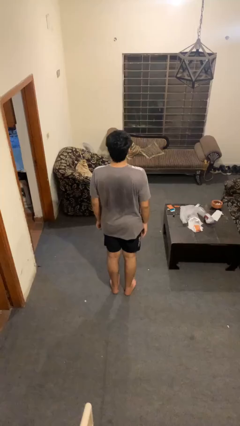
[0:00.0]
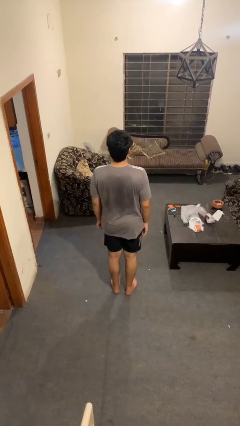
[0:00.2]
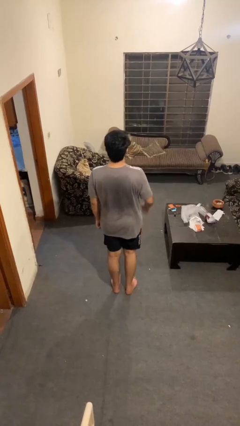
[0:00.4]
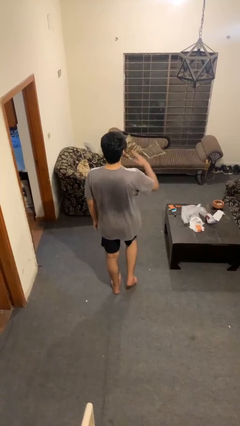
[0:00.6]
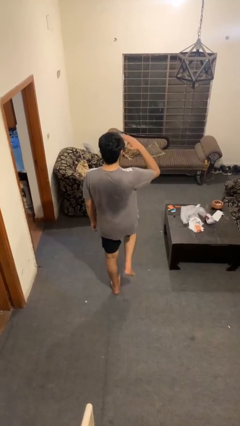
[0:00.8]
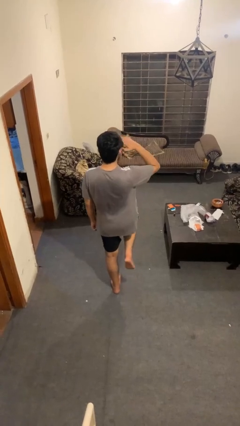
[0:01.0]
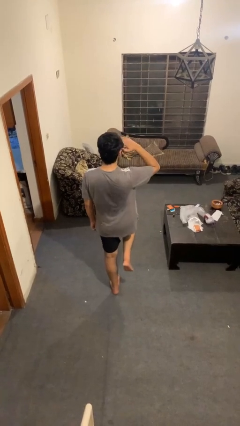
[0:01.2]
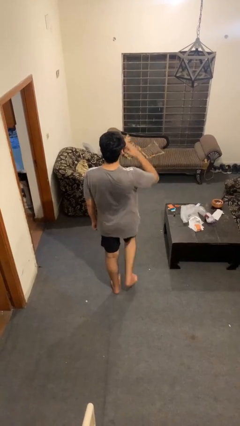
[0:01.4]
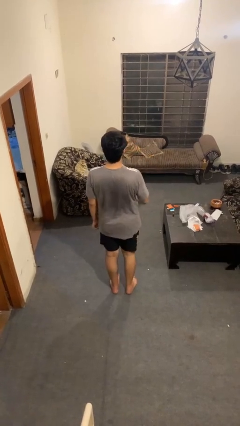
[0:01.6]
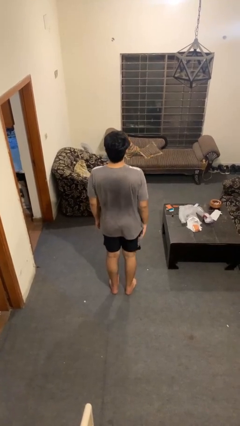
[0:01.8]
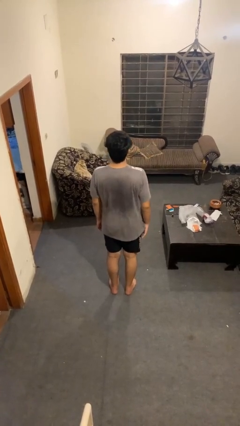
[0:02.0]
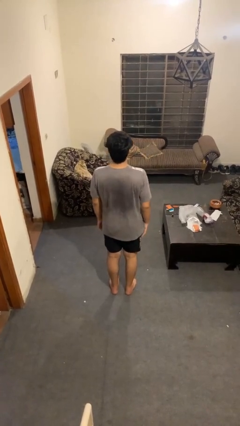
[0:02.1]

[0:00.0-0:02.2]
person salutes

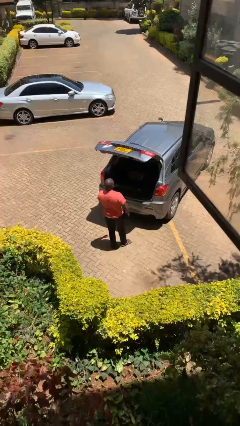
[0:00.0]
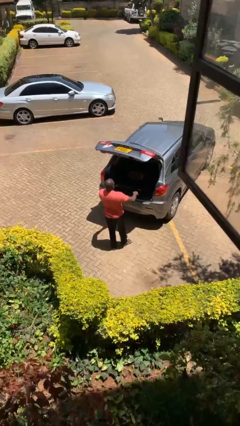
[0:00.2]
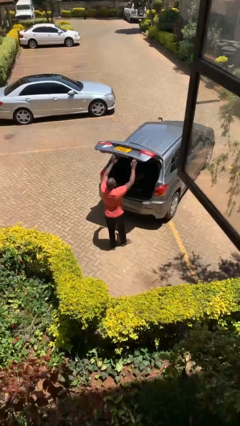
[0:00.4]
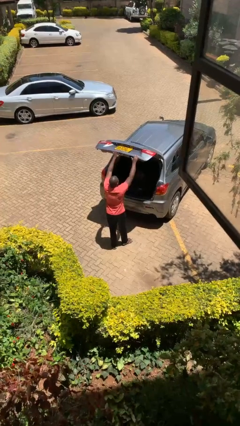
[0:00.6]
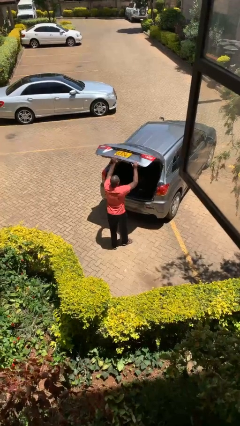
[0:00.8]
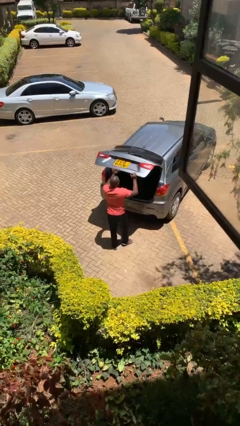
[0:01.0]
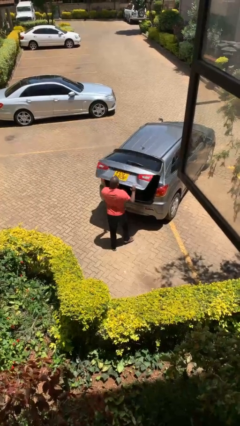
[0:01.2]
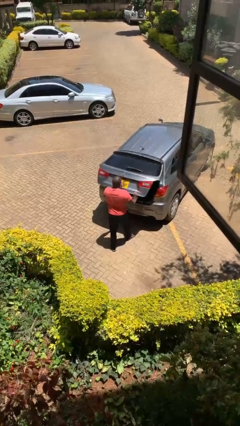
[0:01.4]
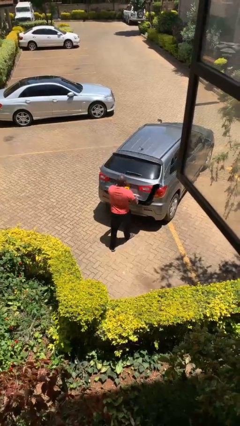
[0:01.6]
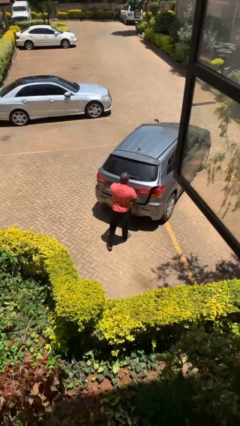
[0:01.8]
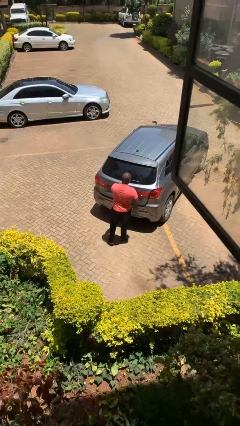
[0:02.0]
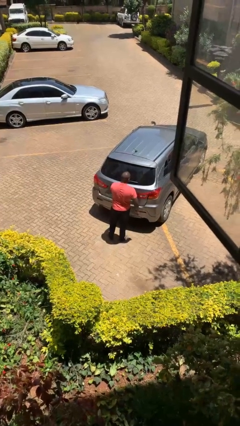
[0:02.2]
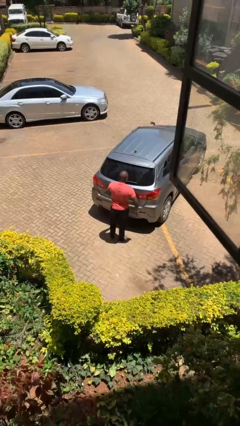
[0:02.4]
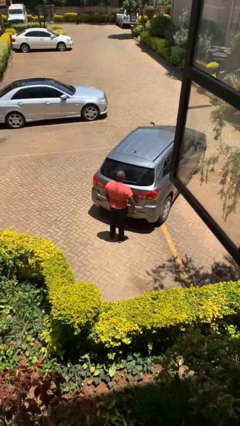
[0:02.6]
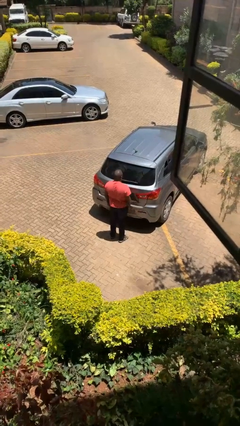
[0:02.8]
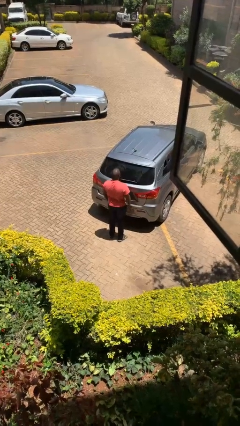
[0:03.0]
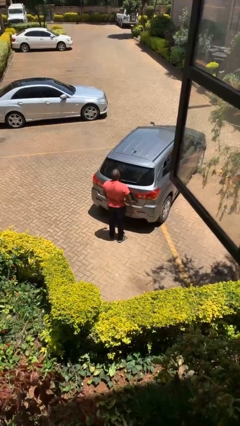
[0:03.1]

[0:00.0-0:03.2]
person closes car trunk

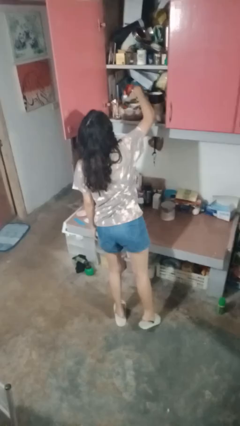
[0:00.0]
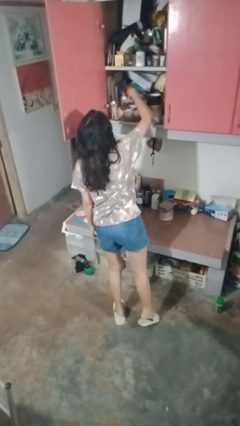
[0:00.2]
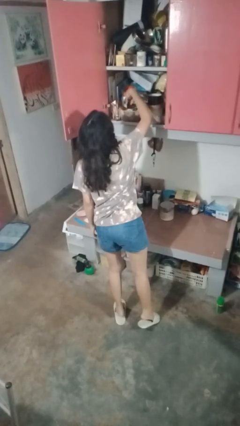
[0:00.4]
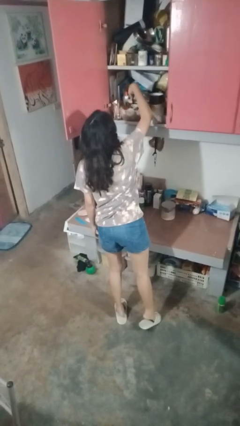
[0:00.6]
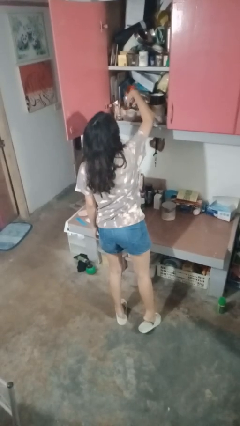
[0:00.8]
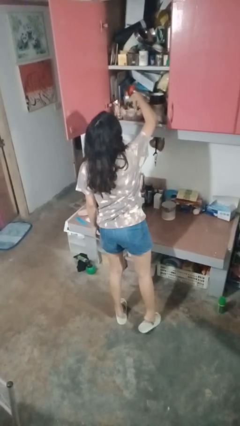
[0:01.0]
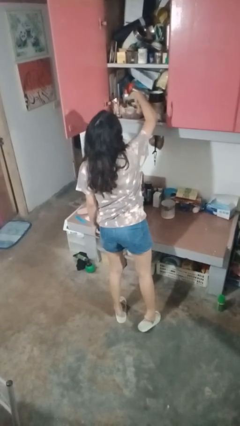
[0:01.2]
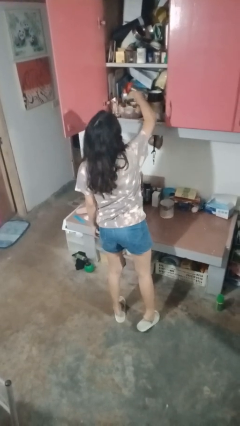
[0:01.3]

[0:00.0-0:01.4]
person searches in cabinet

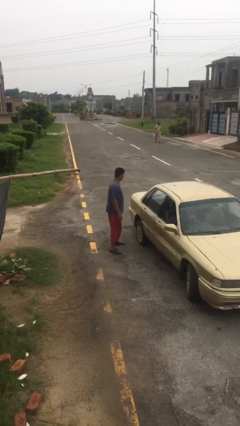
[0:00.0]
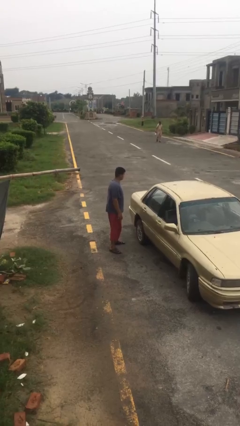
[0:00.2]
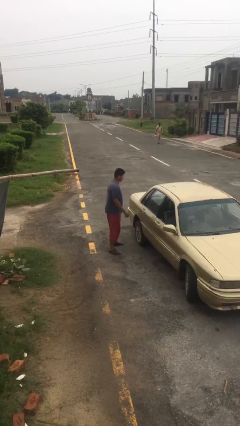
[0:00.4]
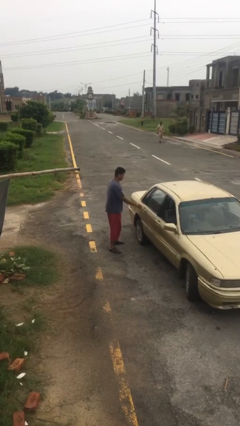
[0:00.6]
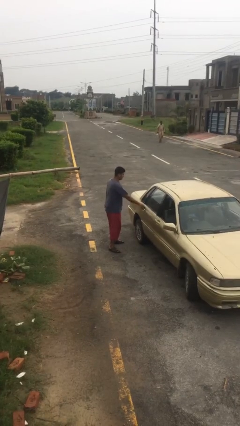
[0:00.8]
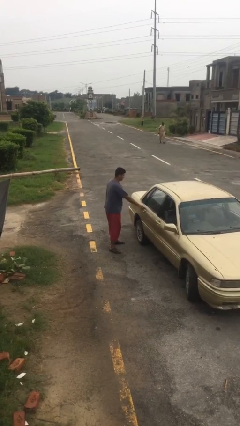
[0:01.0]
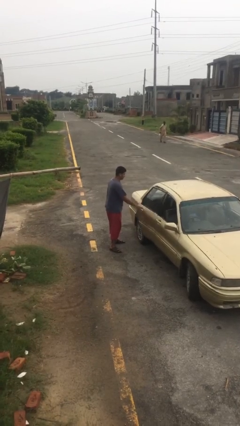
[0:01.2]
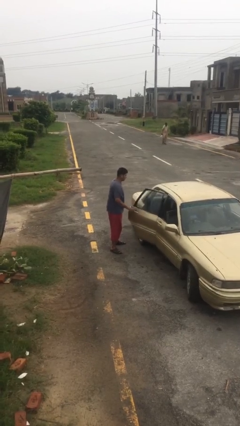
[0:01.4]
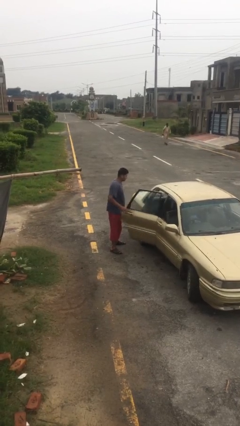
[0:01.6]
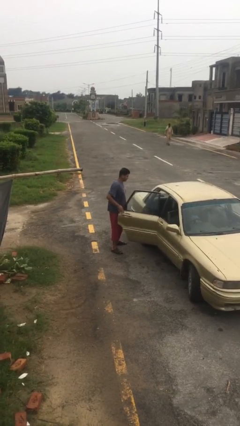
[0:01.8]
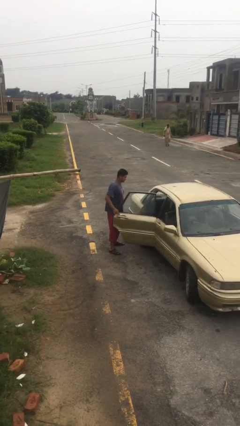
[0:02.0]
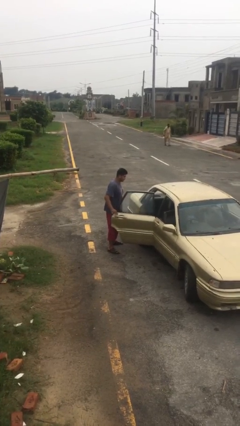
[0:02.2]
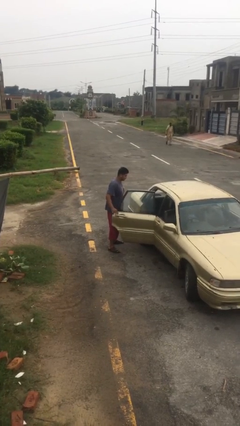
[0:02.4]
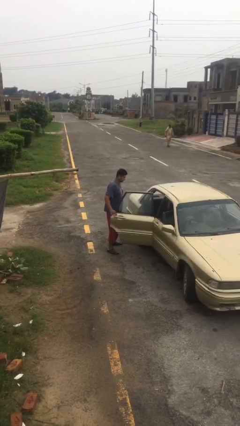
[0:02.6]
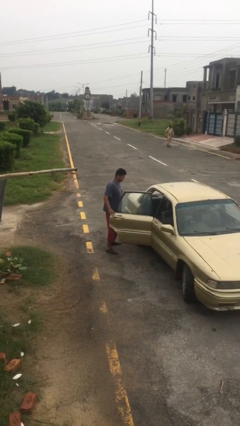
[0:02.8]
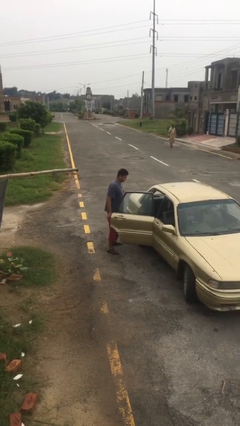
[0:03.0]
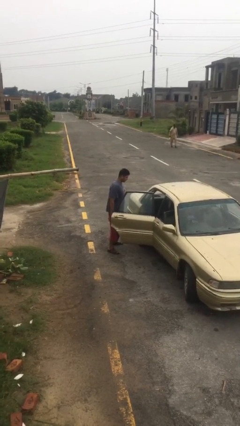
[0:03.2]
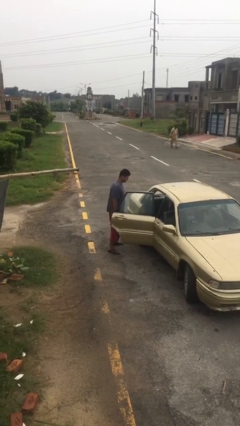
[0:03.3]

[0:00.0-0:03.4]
person opens car door

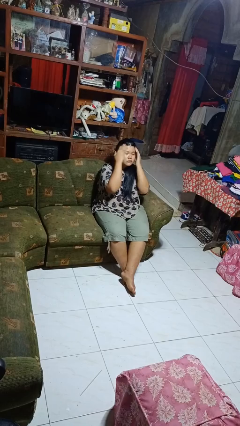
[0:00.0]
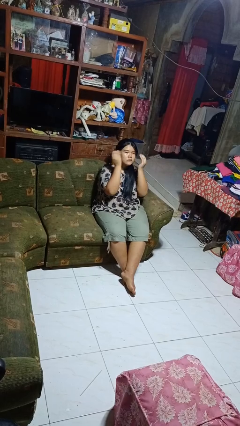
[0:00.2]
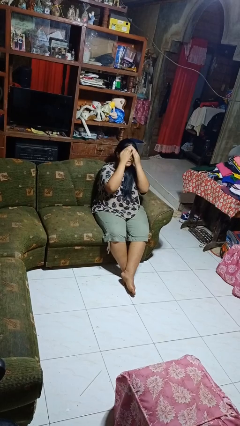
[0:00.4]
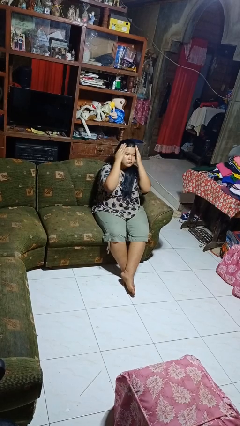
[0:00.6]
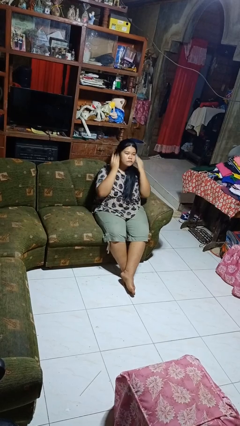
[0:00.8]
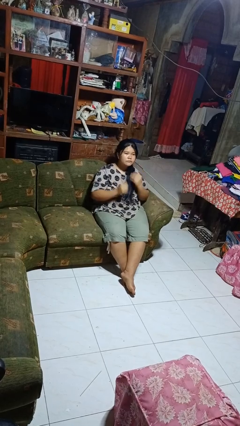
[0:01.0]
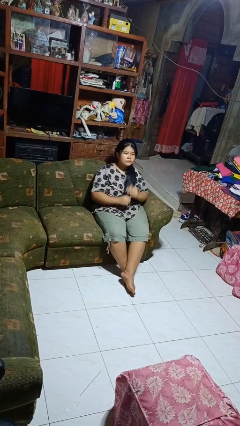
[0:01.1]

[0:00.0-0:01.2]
person strokes hair

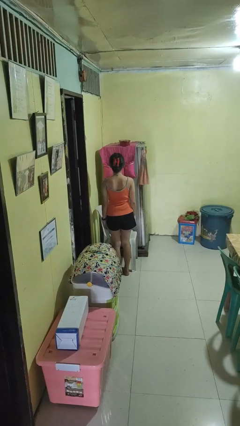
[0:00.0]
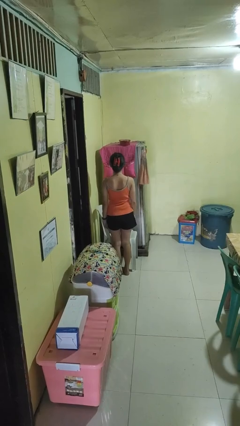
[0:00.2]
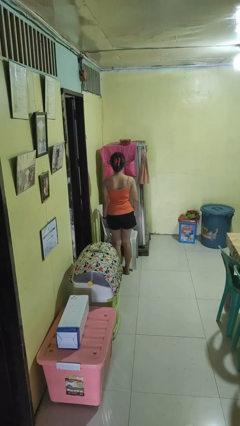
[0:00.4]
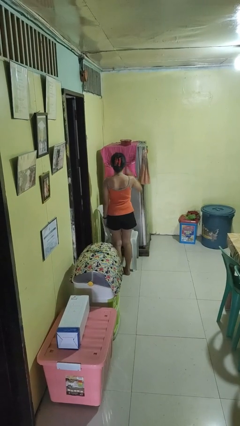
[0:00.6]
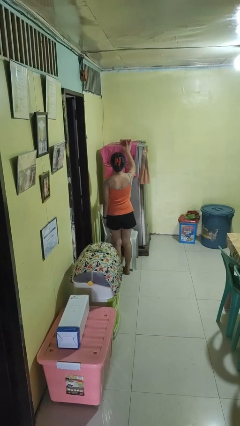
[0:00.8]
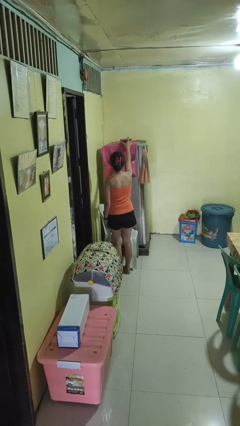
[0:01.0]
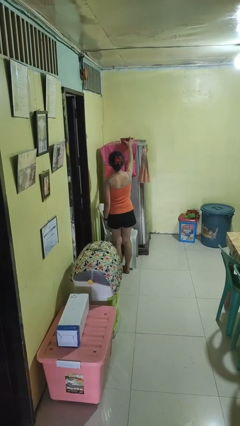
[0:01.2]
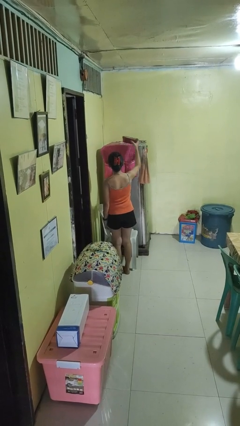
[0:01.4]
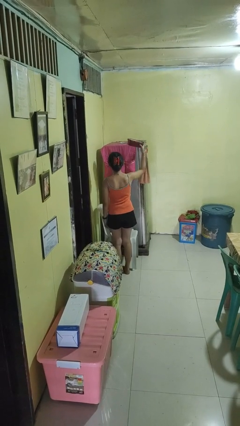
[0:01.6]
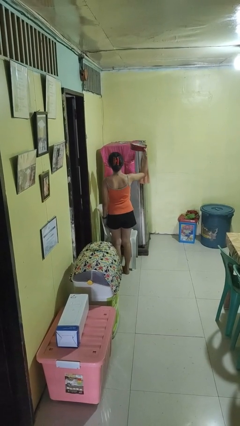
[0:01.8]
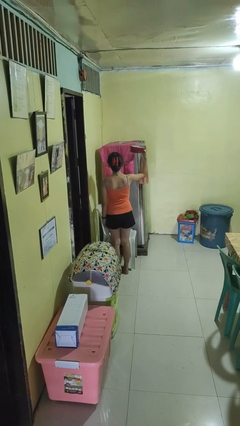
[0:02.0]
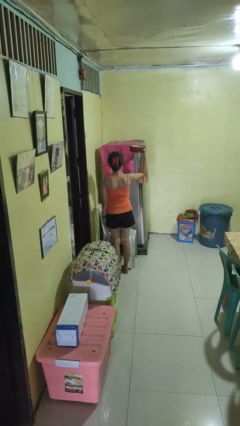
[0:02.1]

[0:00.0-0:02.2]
person picks up object from shelf

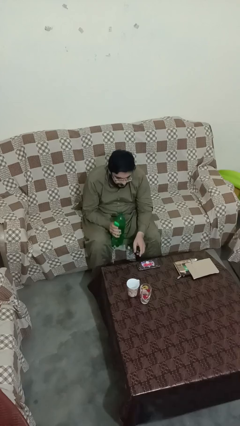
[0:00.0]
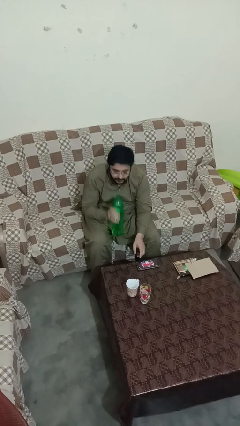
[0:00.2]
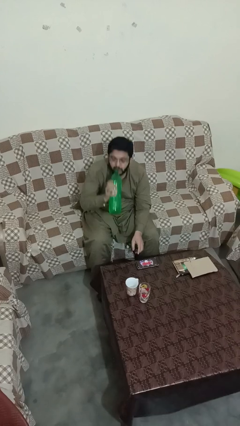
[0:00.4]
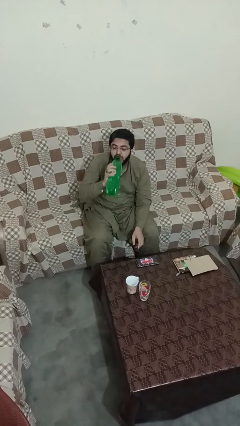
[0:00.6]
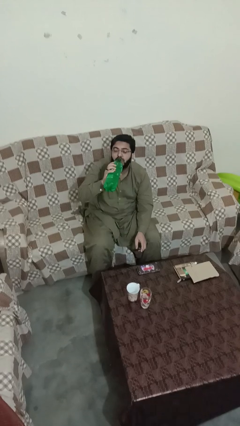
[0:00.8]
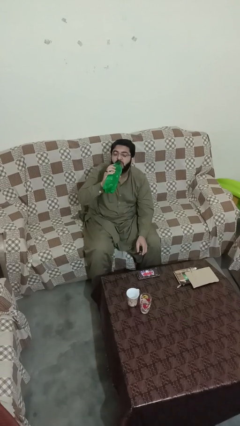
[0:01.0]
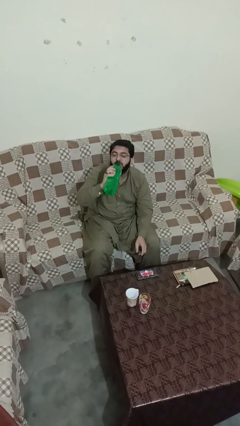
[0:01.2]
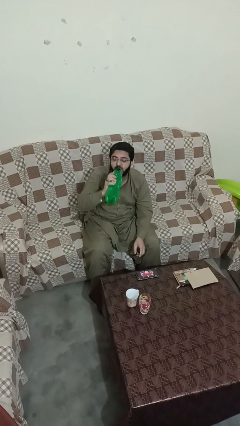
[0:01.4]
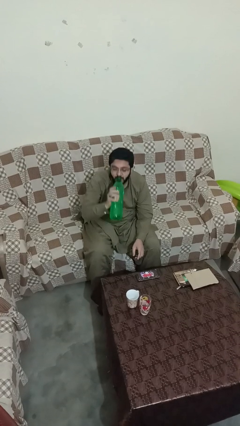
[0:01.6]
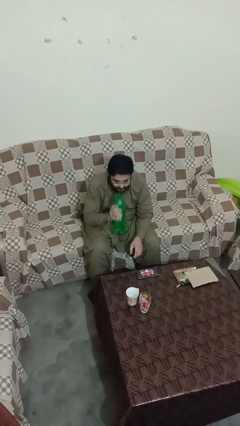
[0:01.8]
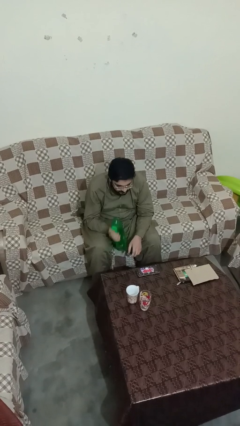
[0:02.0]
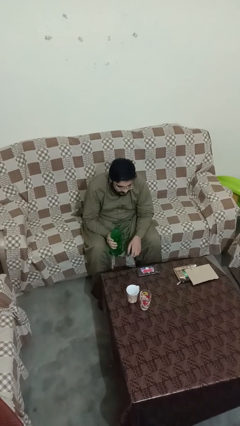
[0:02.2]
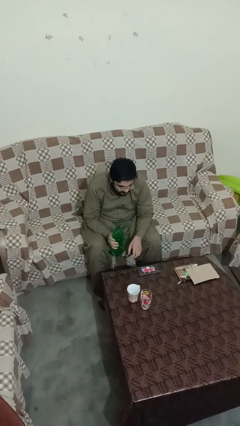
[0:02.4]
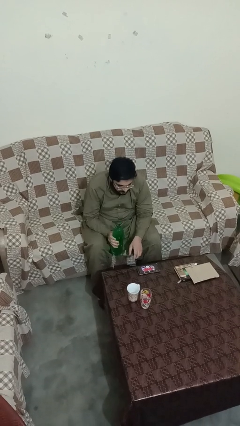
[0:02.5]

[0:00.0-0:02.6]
person drinks from bottle

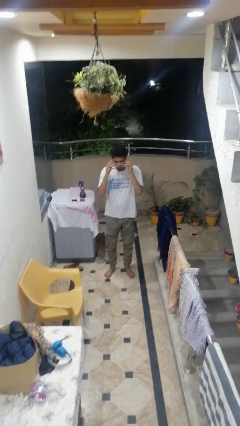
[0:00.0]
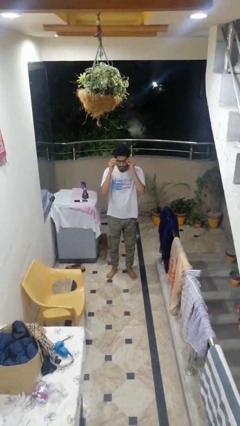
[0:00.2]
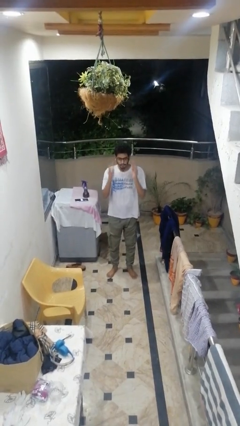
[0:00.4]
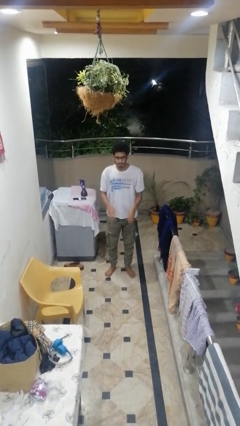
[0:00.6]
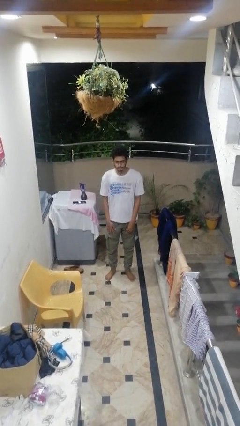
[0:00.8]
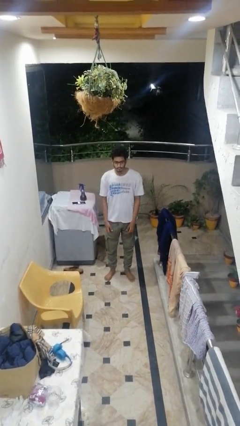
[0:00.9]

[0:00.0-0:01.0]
person puts on glasses
